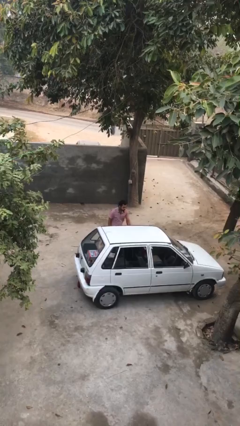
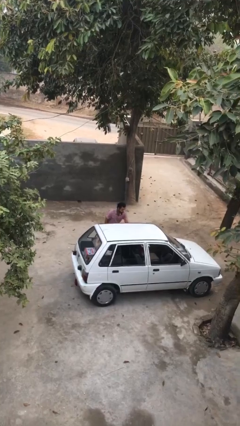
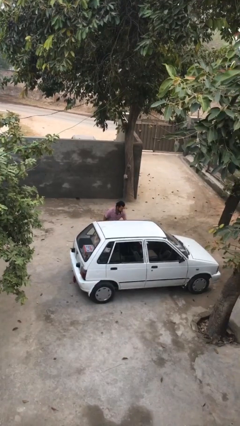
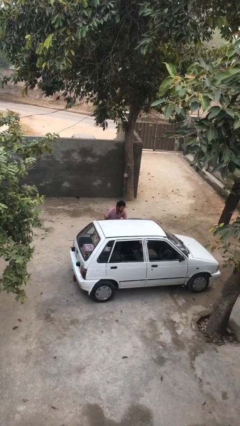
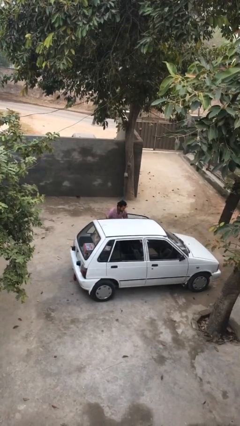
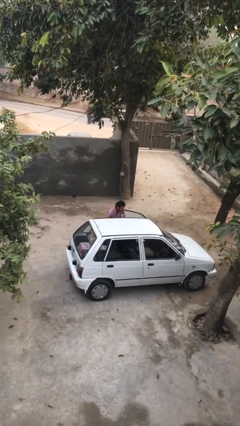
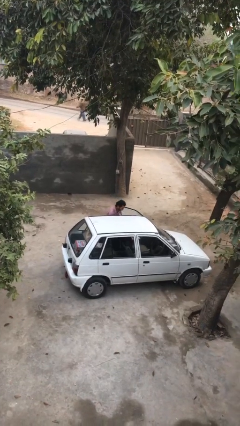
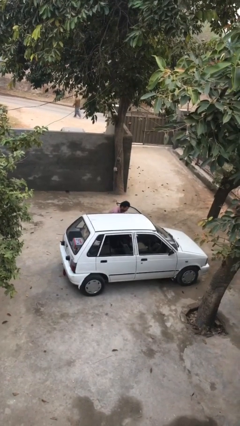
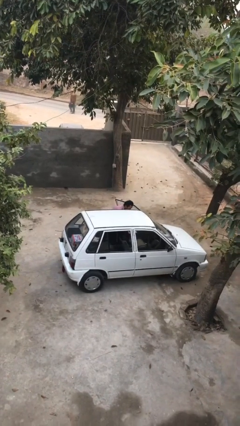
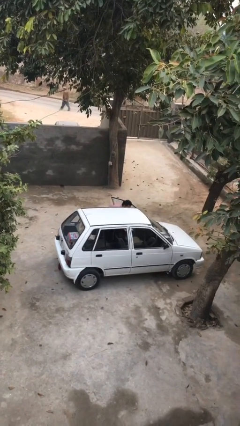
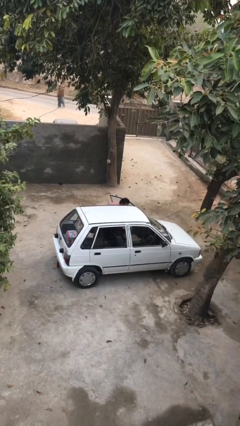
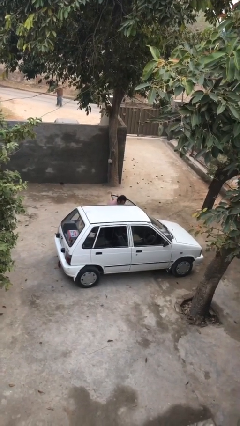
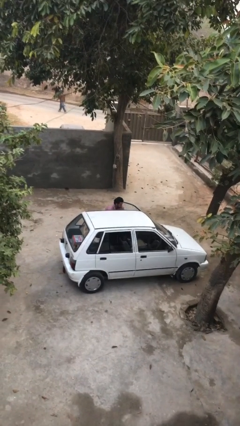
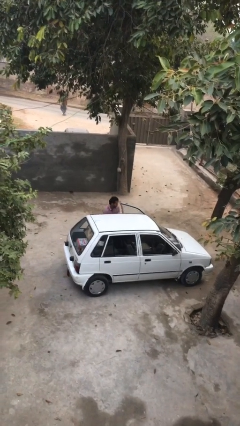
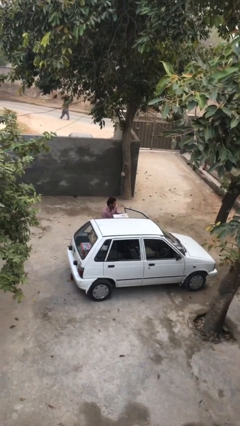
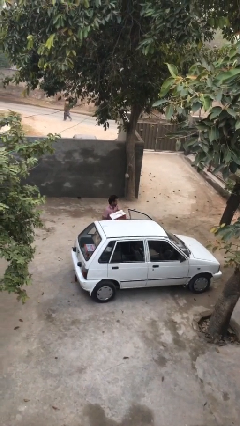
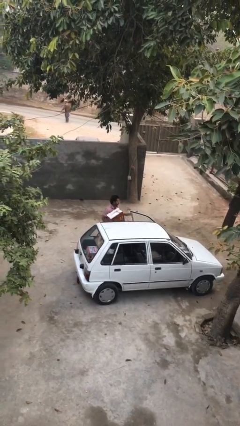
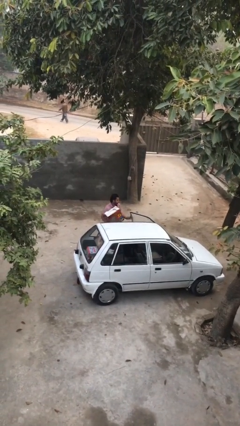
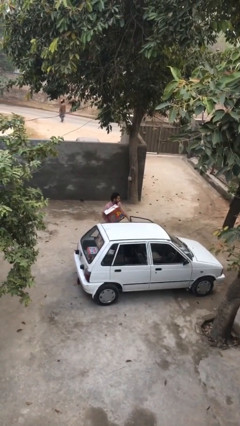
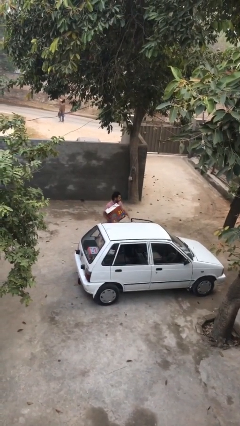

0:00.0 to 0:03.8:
person unloads car

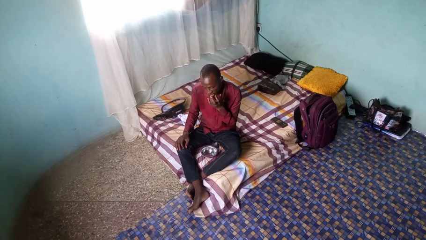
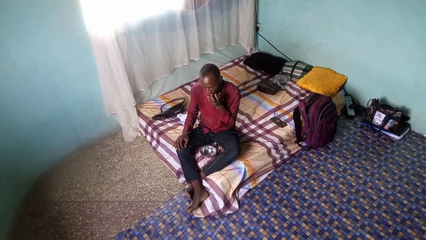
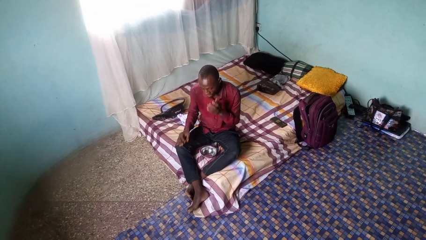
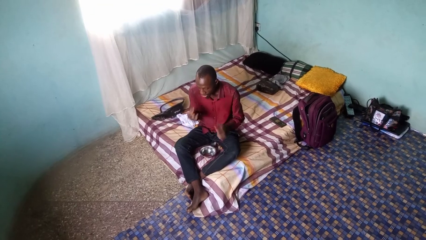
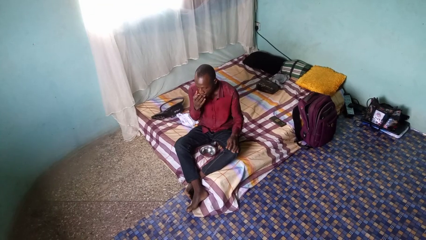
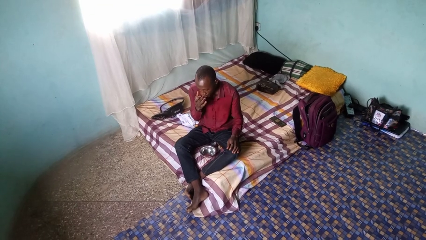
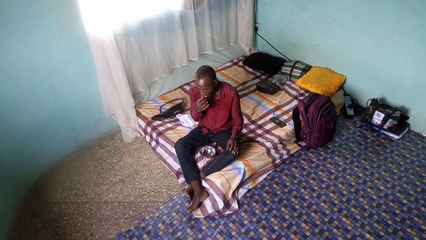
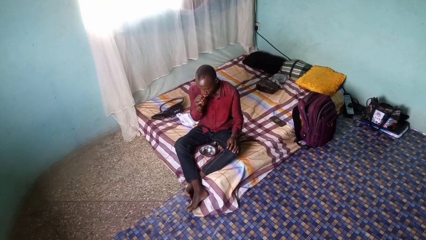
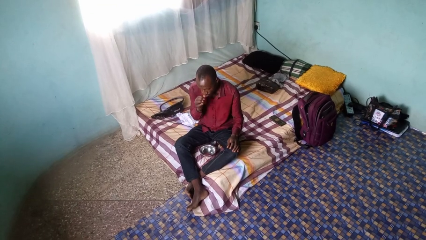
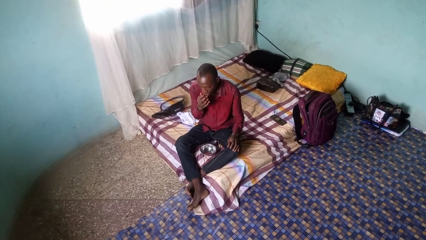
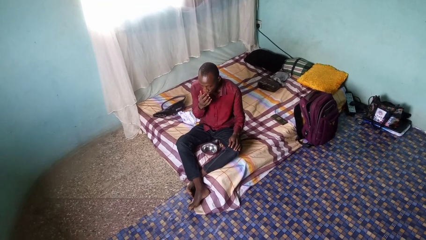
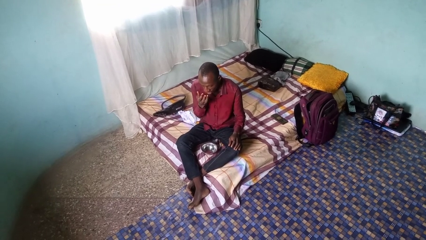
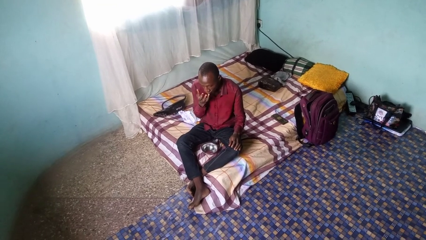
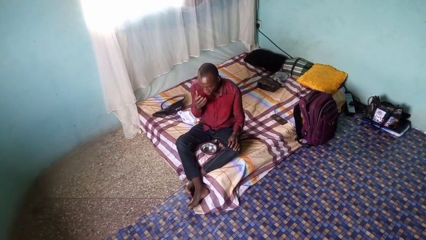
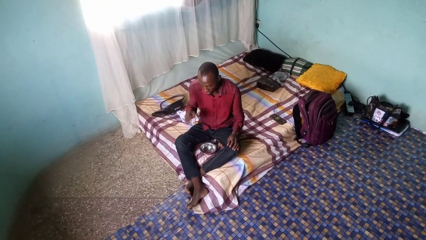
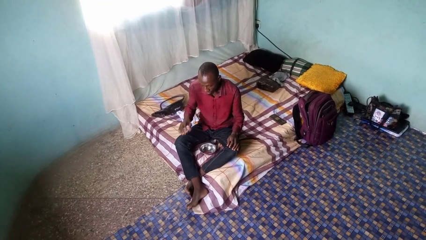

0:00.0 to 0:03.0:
person licks fingers

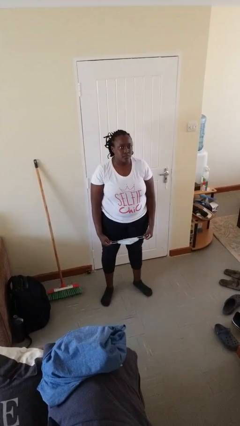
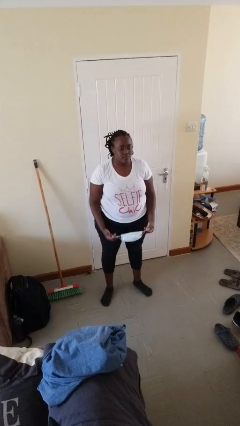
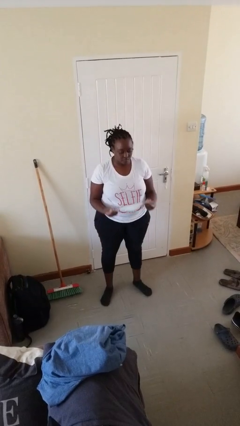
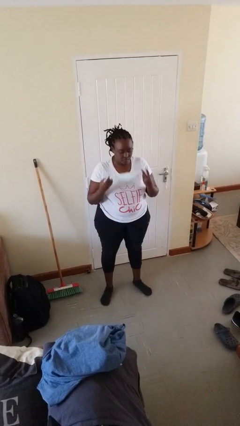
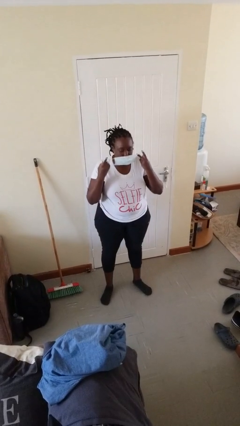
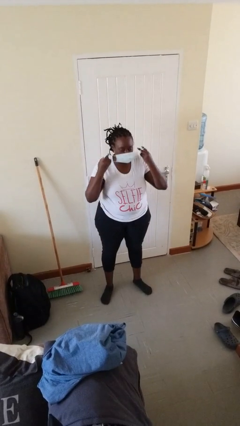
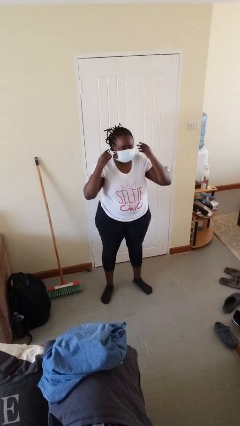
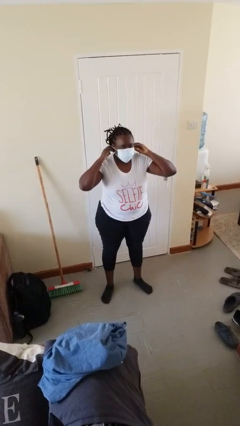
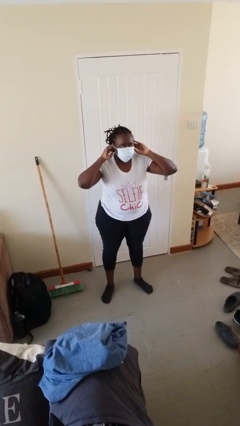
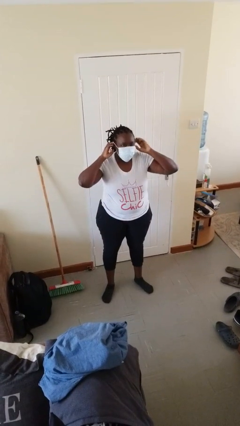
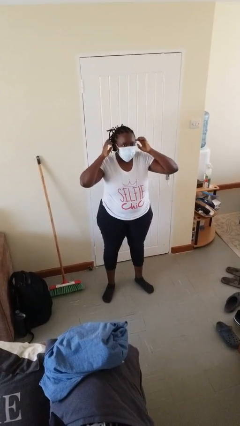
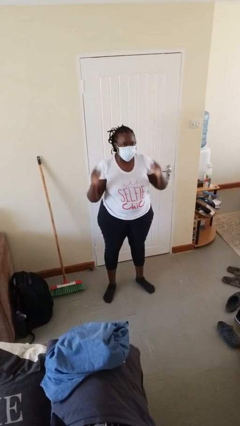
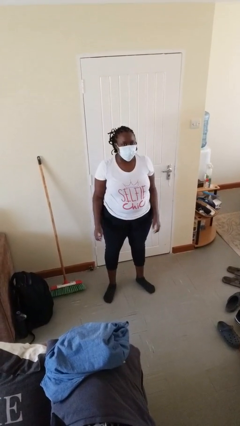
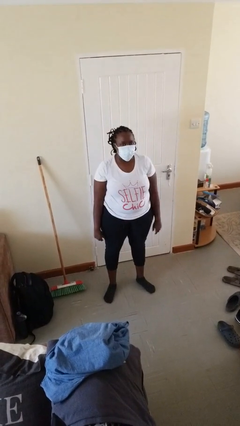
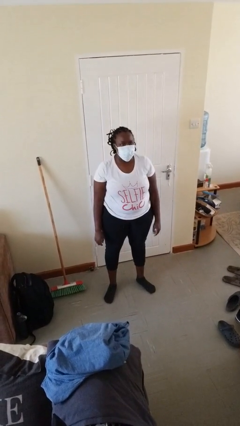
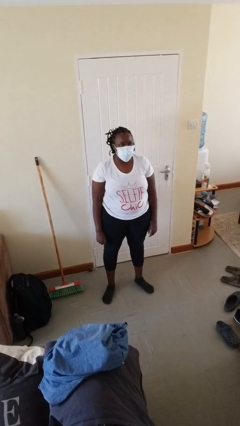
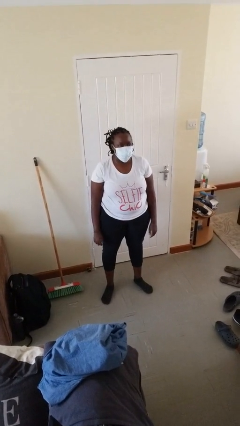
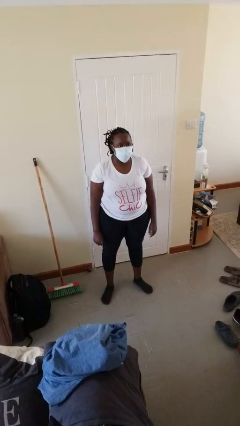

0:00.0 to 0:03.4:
person puts on facemask

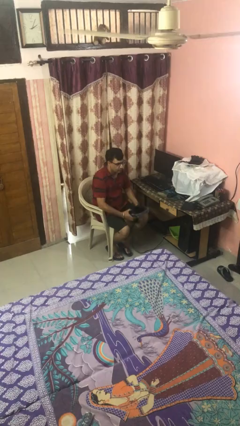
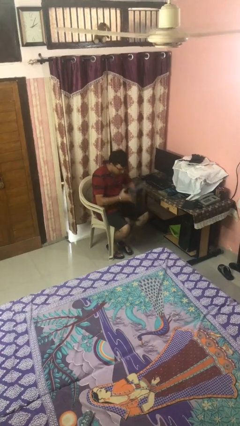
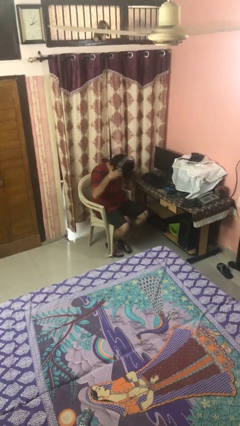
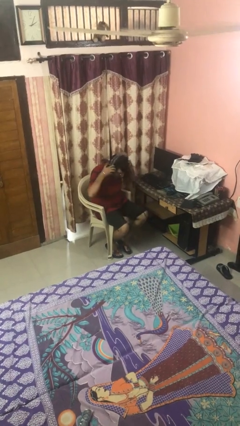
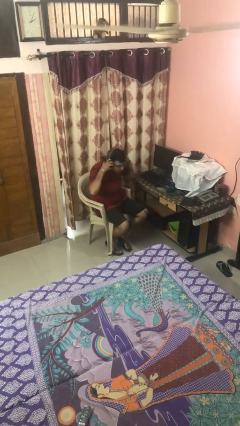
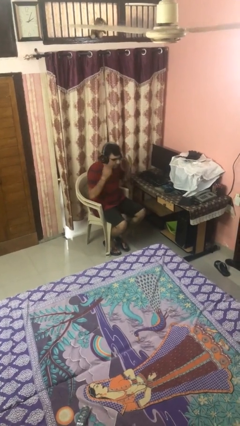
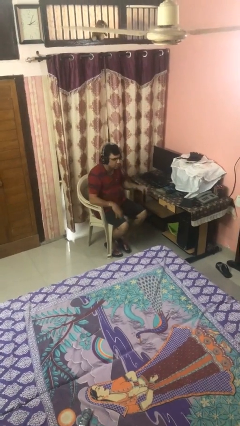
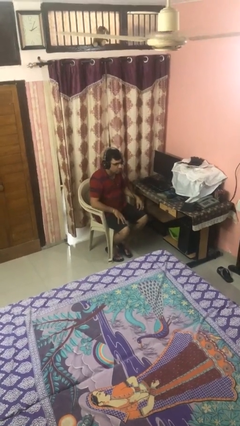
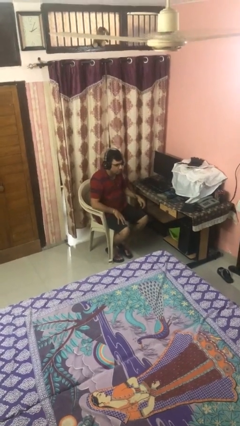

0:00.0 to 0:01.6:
person puts on headphones

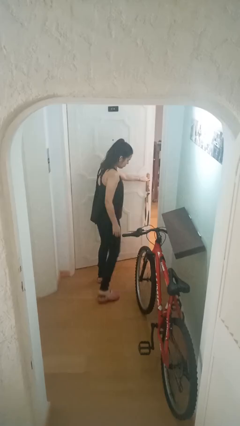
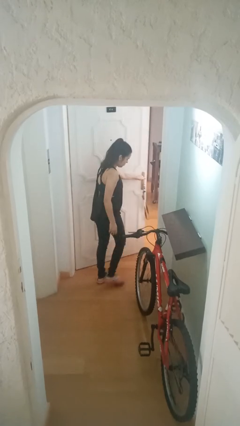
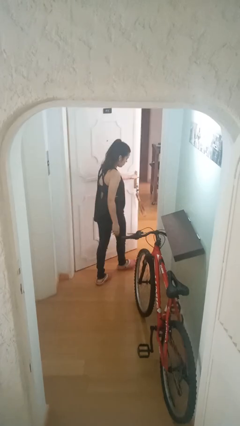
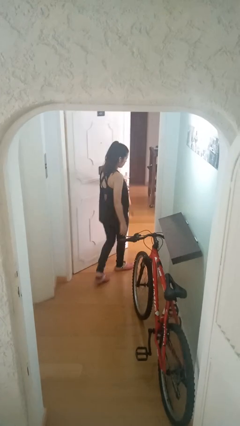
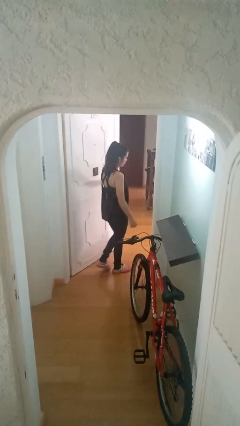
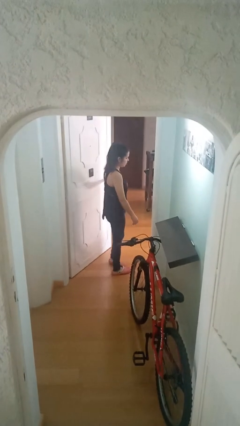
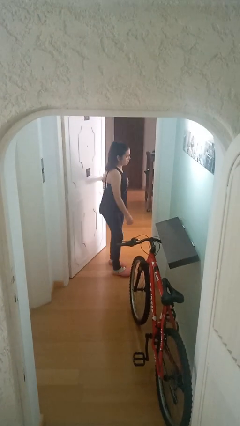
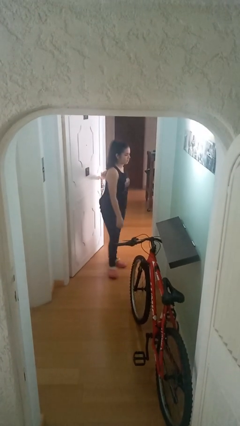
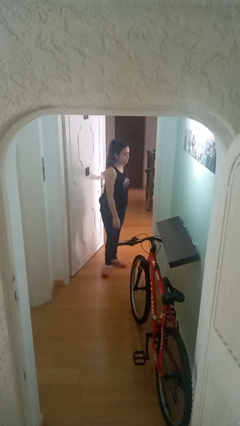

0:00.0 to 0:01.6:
person opens facility door

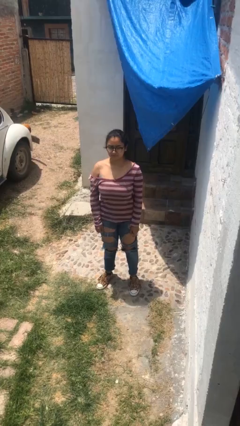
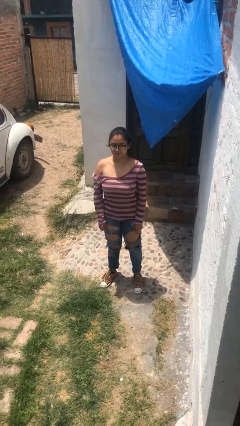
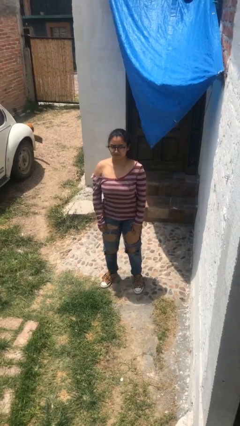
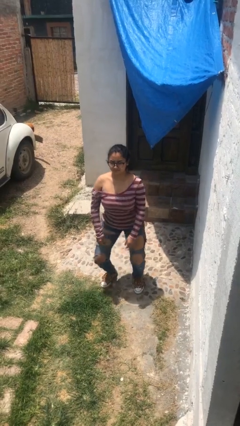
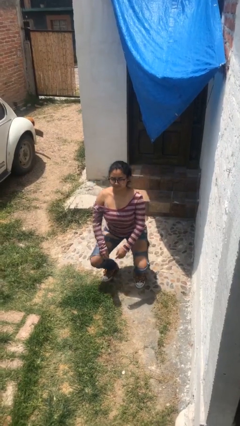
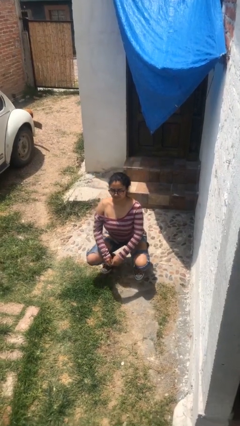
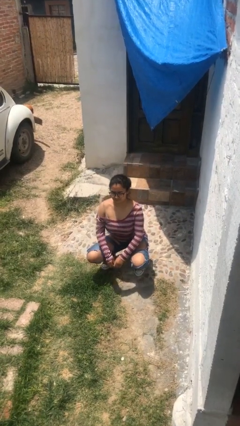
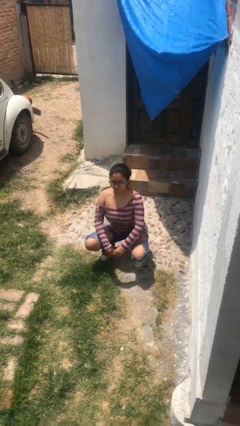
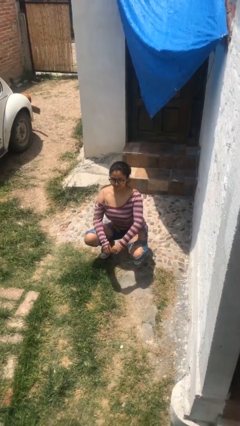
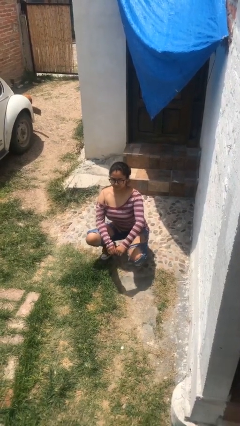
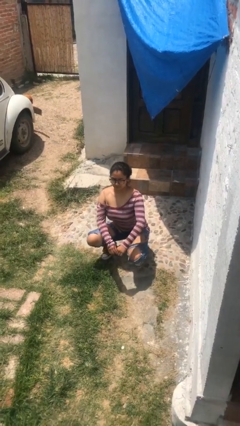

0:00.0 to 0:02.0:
person squats

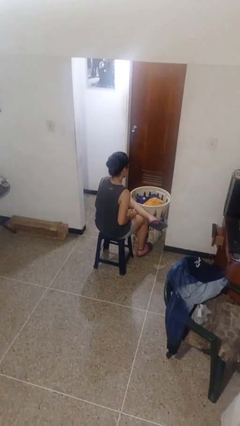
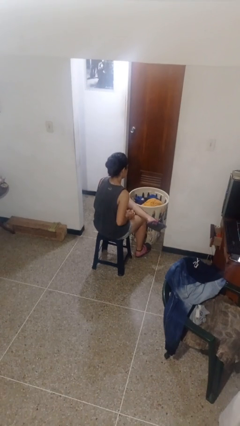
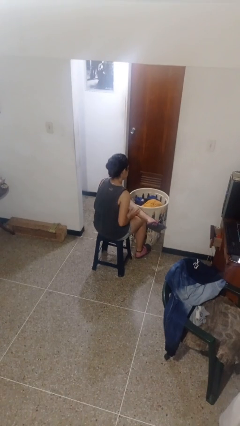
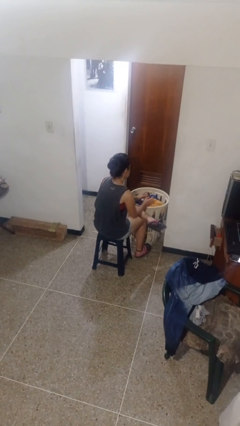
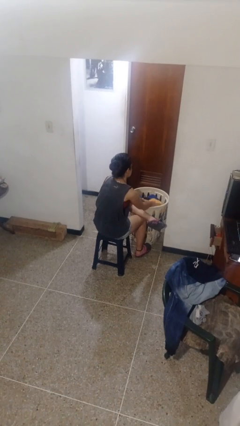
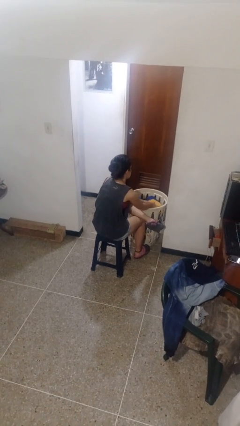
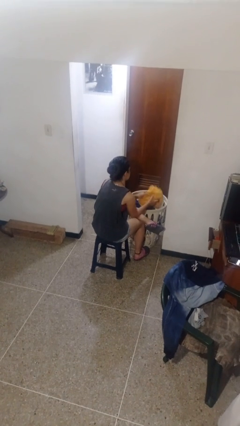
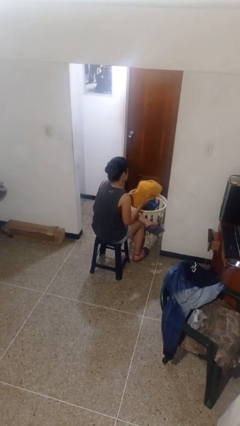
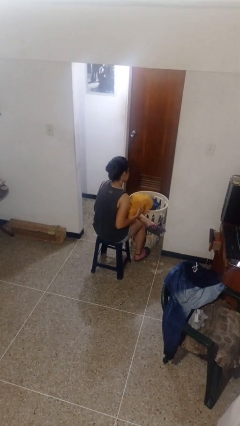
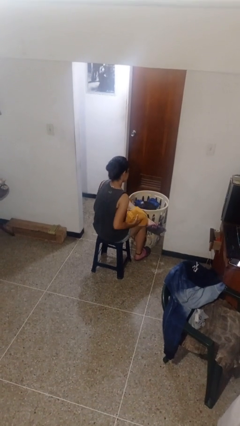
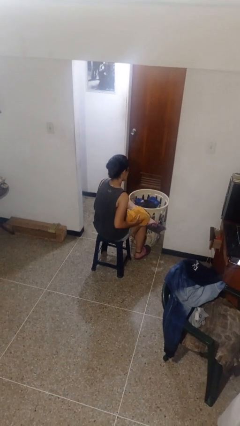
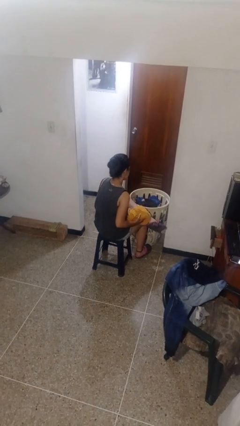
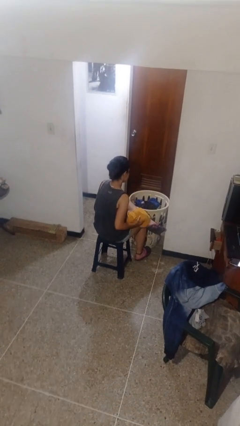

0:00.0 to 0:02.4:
person takes object from basket
